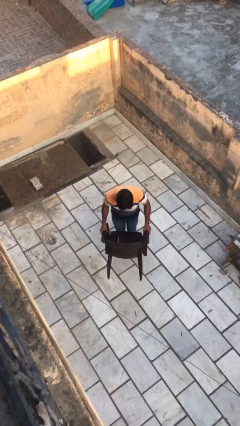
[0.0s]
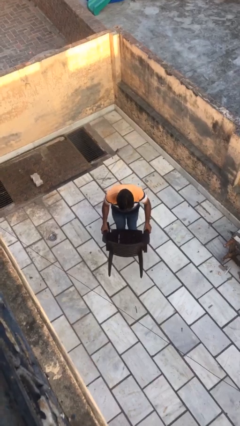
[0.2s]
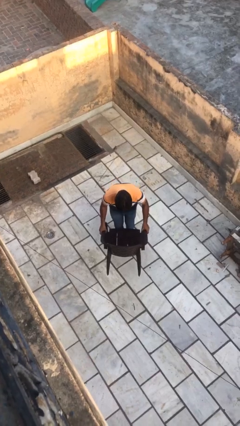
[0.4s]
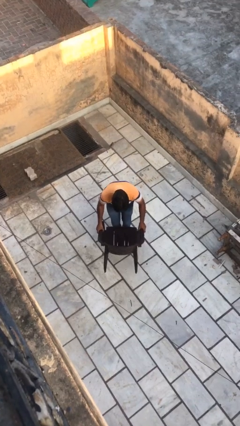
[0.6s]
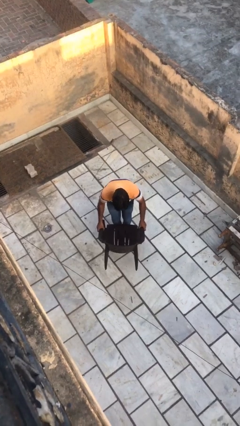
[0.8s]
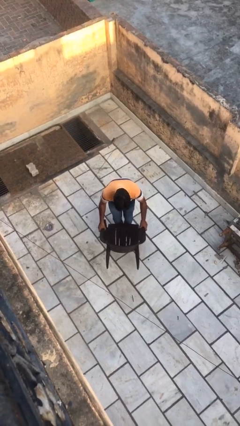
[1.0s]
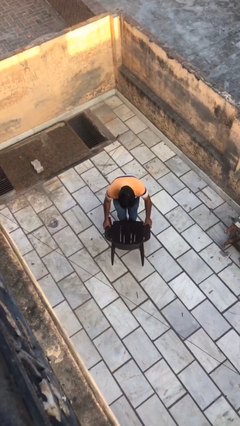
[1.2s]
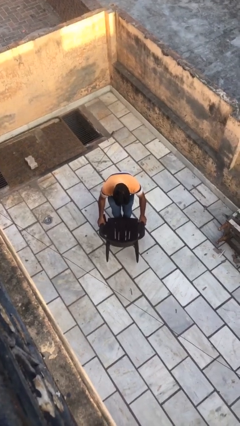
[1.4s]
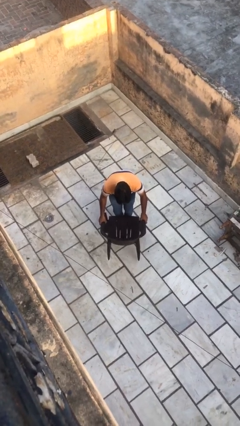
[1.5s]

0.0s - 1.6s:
person puts down object on floor

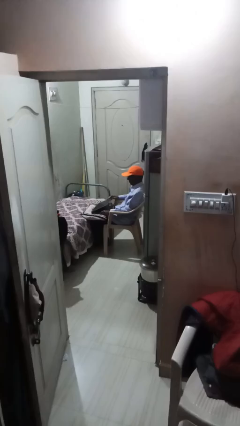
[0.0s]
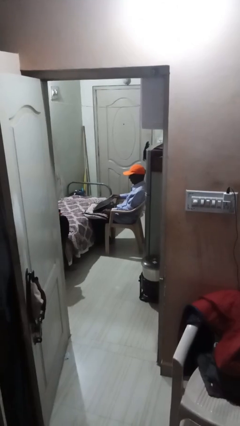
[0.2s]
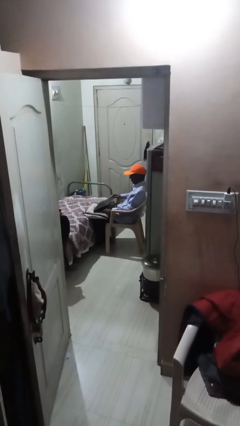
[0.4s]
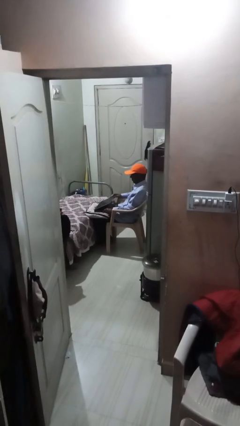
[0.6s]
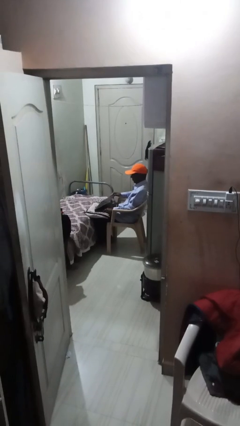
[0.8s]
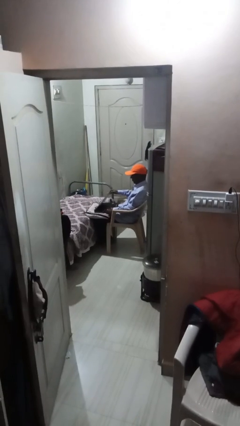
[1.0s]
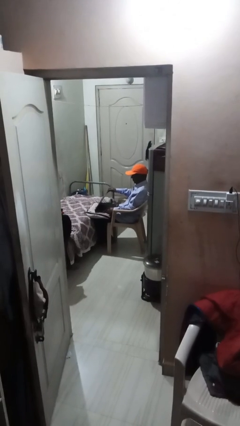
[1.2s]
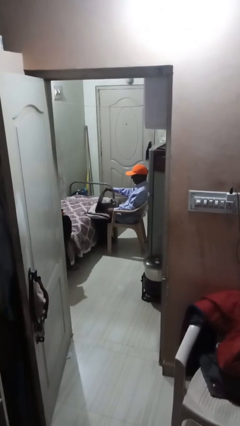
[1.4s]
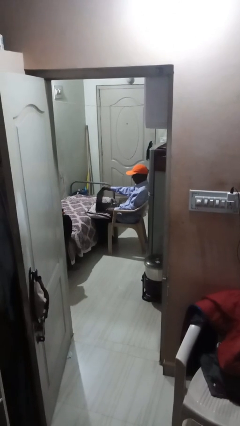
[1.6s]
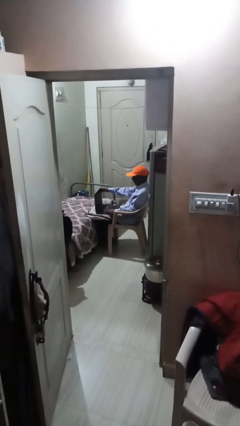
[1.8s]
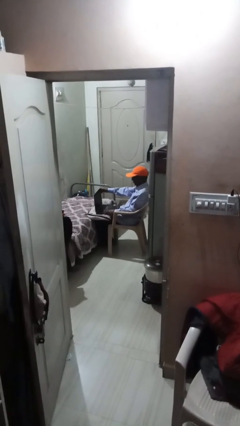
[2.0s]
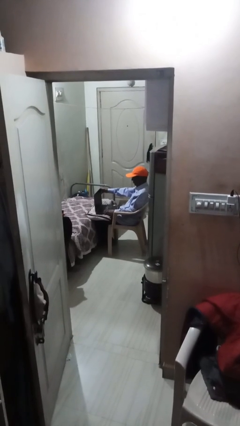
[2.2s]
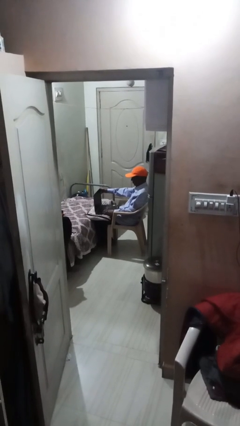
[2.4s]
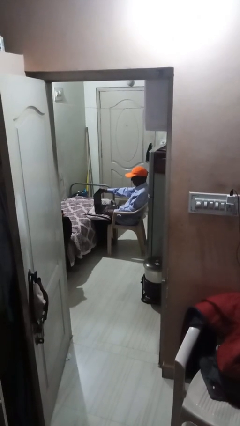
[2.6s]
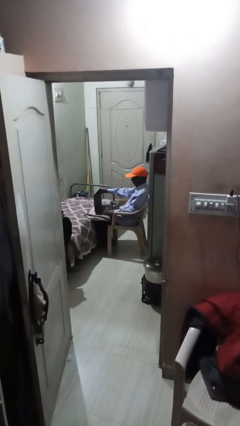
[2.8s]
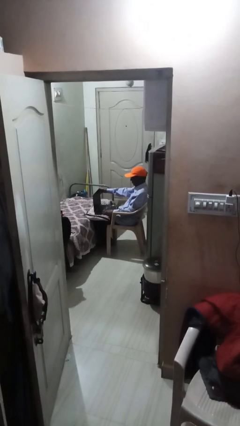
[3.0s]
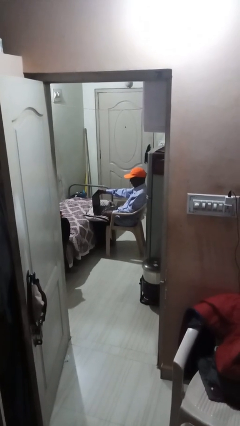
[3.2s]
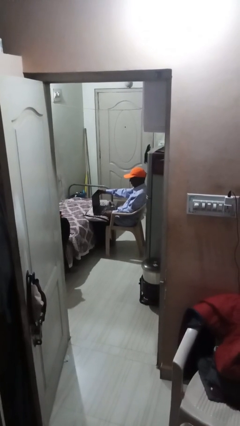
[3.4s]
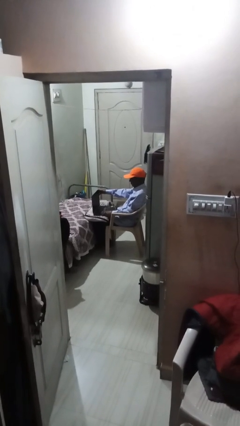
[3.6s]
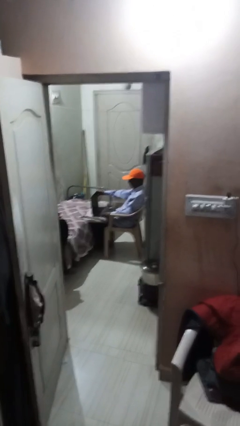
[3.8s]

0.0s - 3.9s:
person interacts with laptop

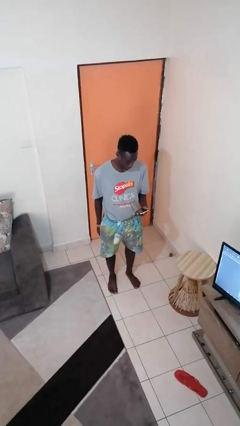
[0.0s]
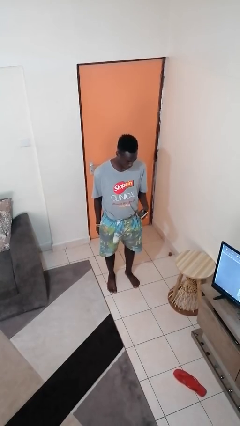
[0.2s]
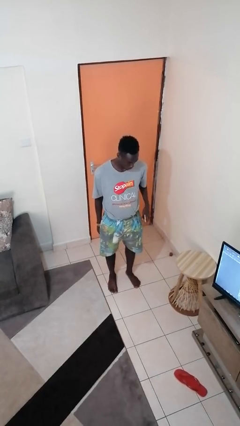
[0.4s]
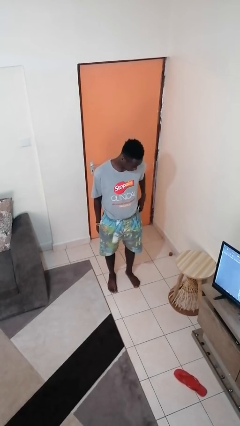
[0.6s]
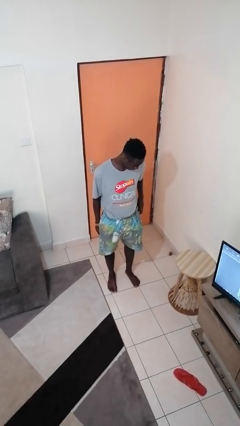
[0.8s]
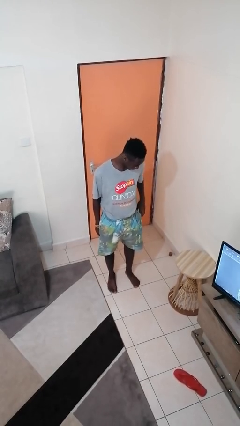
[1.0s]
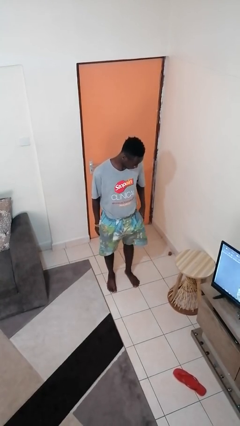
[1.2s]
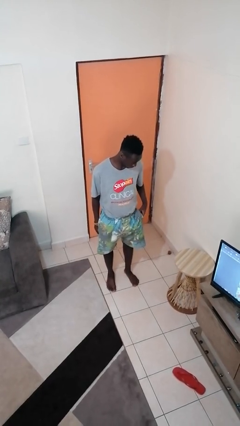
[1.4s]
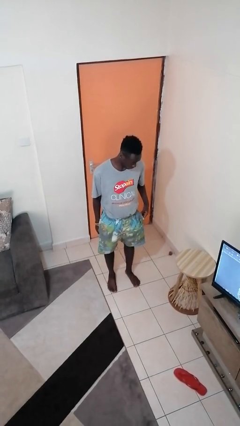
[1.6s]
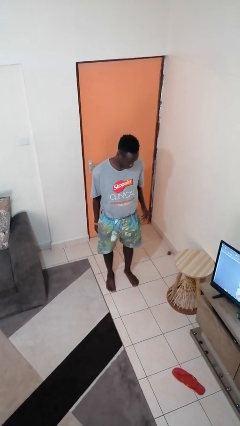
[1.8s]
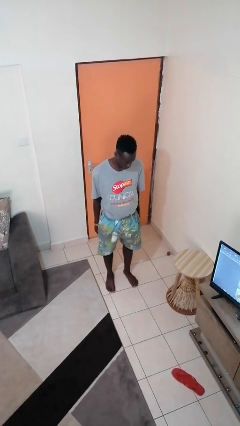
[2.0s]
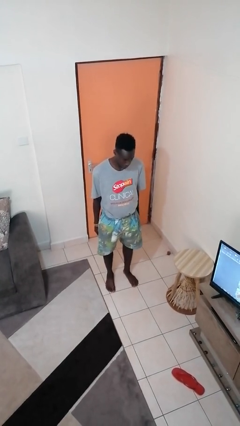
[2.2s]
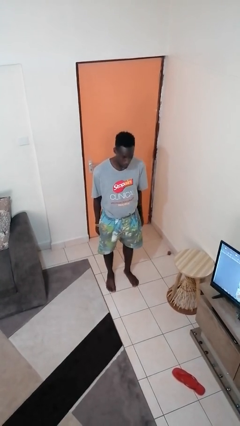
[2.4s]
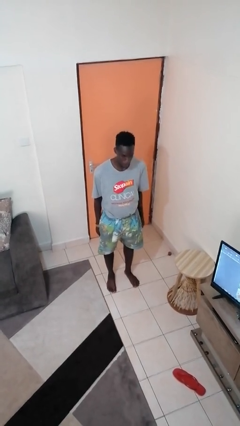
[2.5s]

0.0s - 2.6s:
person puts phone into pocket

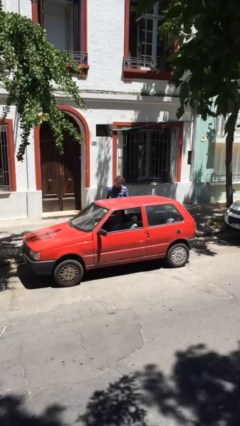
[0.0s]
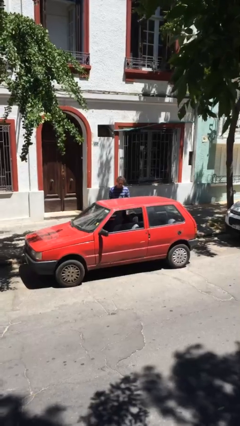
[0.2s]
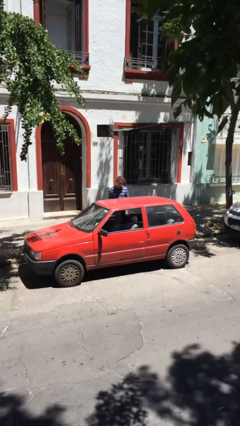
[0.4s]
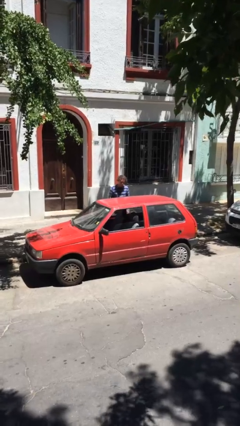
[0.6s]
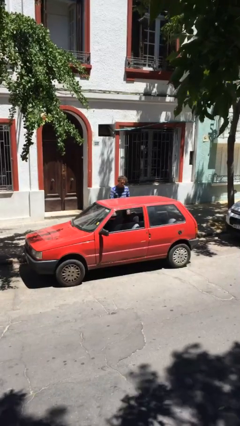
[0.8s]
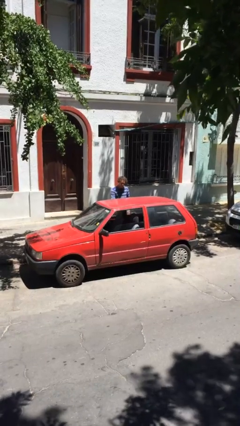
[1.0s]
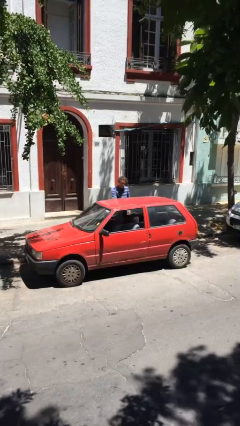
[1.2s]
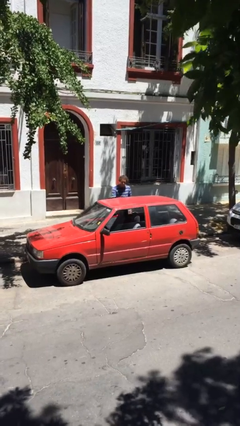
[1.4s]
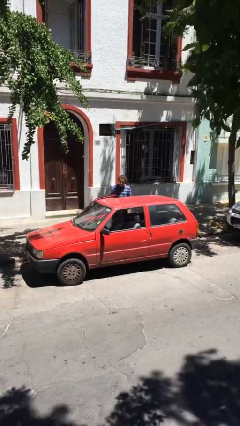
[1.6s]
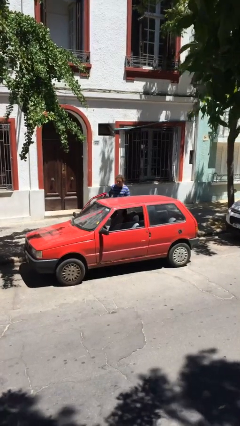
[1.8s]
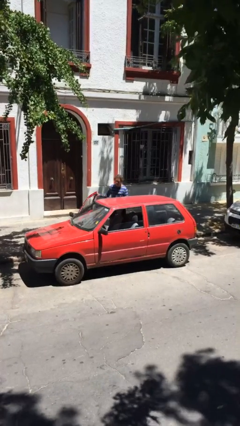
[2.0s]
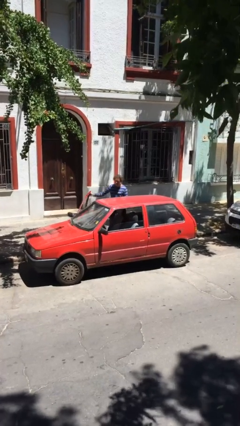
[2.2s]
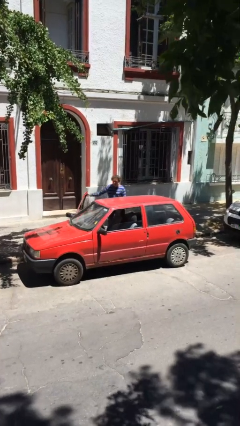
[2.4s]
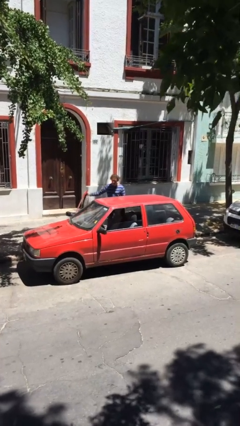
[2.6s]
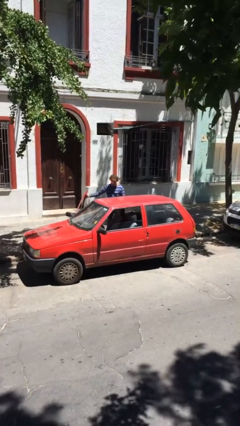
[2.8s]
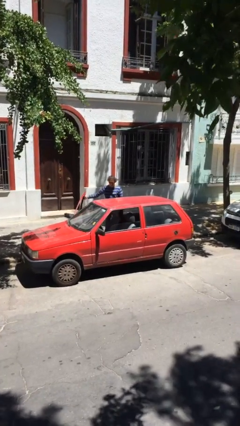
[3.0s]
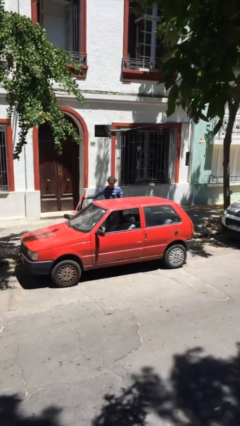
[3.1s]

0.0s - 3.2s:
person opens car door

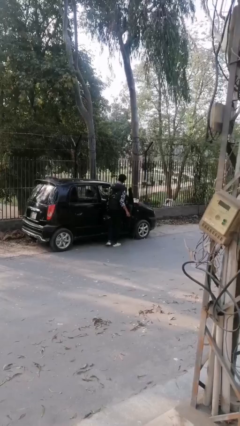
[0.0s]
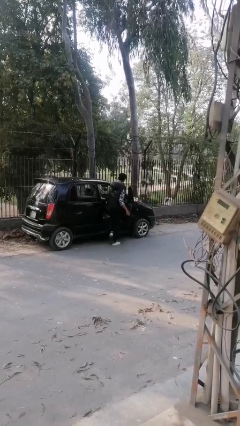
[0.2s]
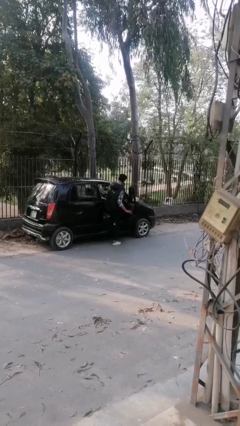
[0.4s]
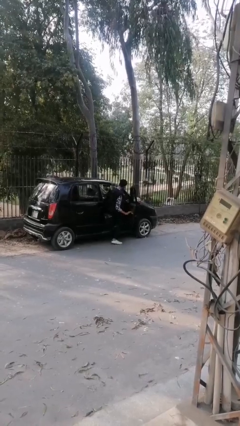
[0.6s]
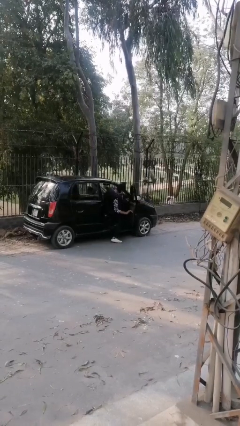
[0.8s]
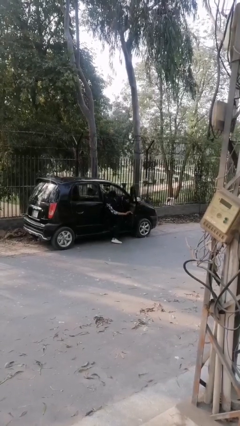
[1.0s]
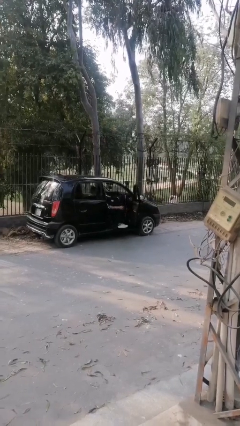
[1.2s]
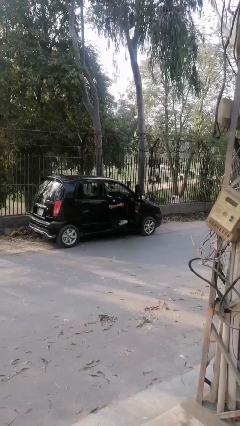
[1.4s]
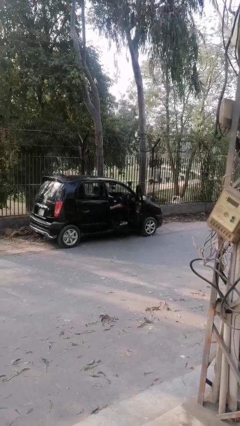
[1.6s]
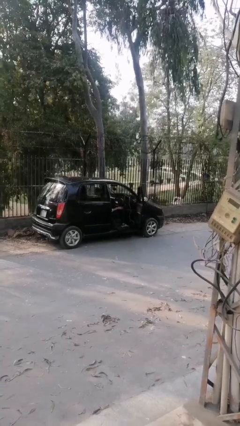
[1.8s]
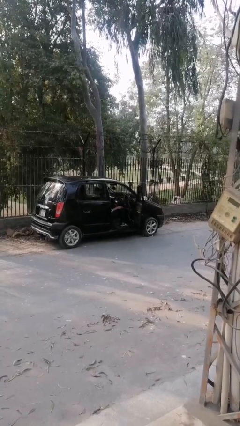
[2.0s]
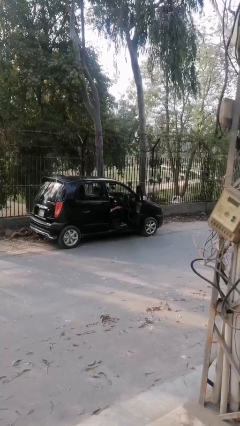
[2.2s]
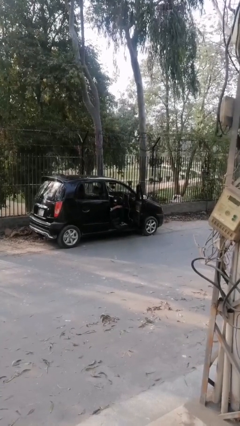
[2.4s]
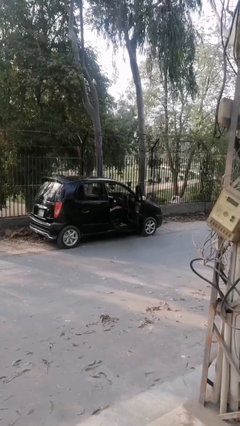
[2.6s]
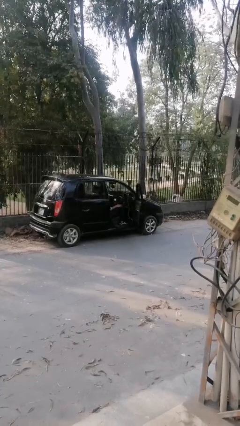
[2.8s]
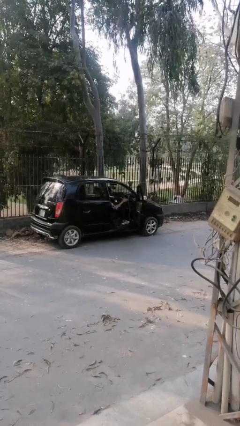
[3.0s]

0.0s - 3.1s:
person enters car

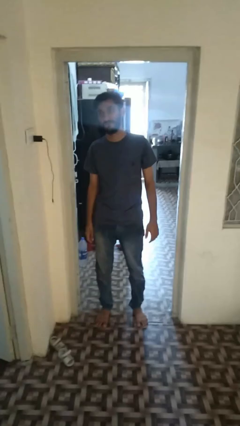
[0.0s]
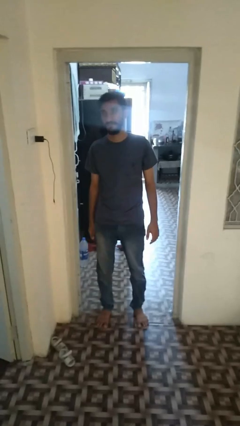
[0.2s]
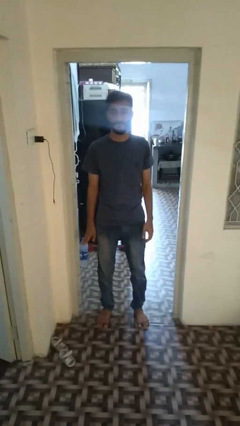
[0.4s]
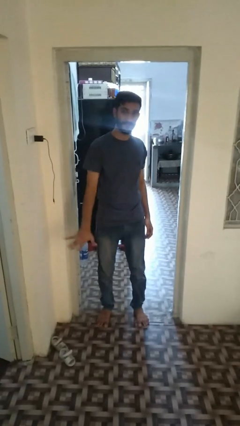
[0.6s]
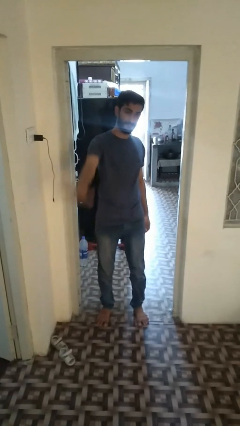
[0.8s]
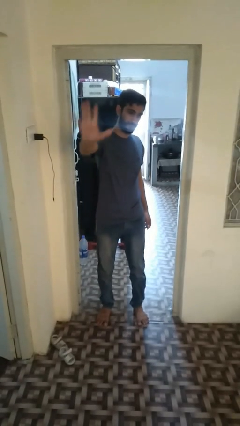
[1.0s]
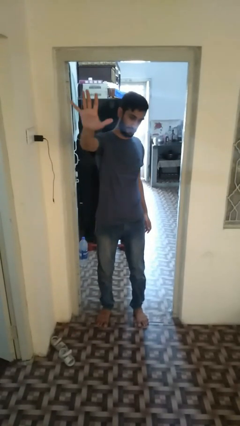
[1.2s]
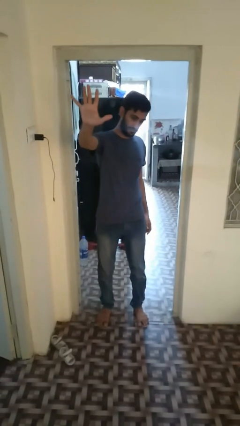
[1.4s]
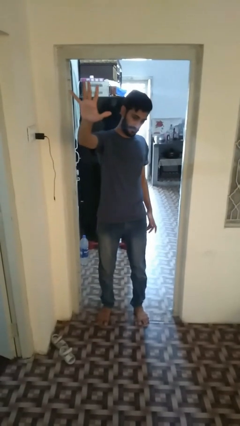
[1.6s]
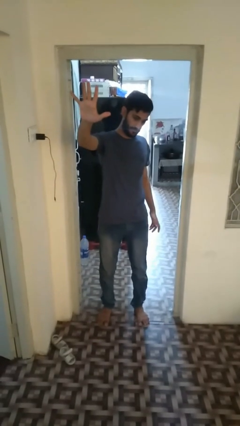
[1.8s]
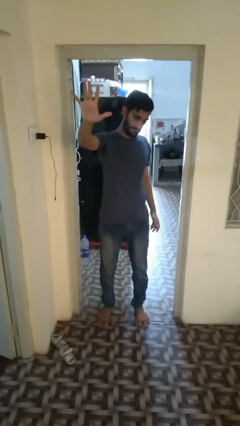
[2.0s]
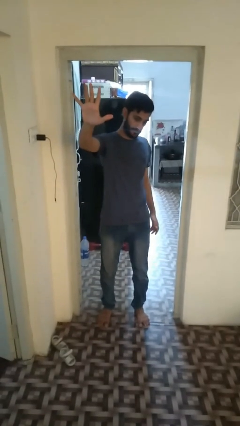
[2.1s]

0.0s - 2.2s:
person gestures number five

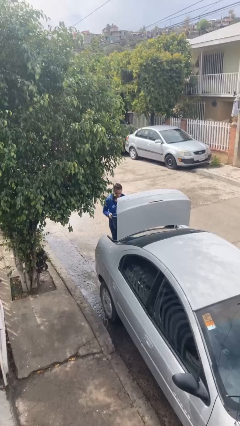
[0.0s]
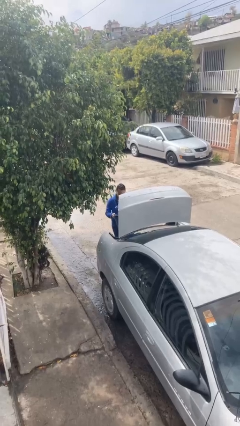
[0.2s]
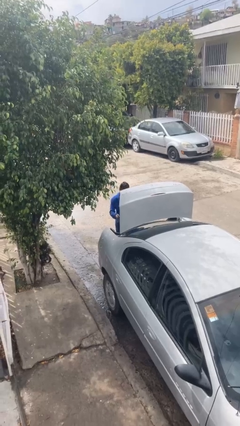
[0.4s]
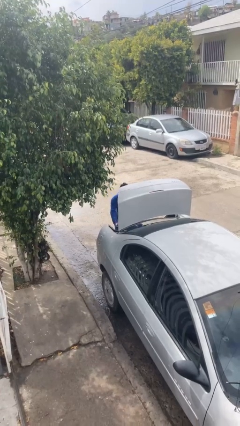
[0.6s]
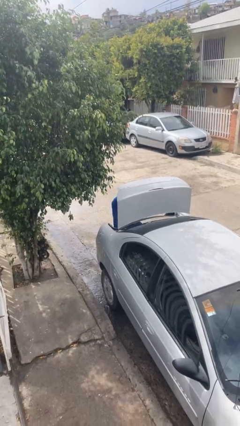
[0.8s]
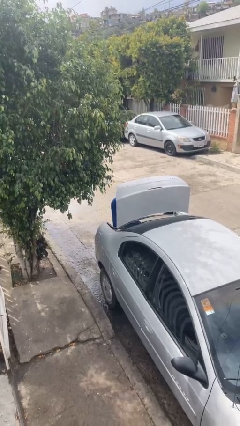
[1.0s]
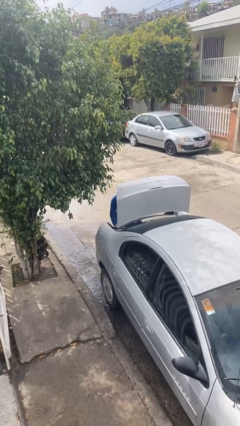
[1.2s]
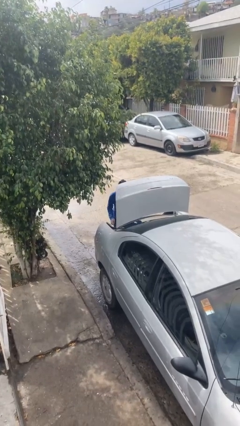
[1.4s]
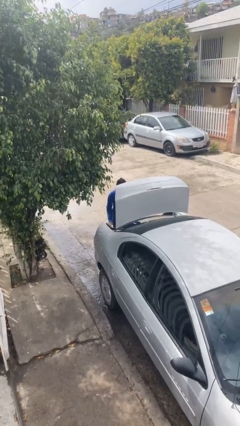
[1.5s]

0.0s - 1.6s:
person loads car
